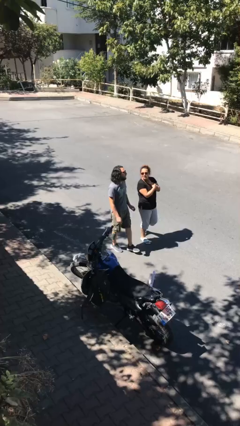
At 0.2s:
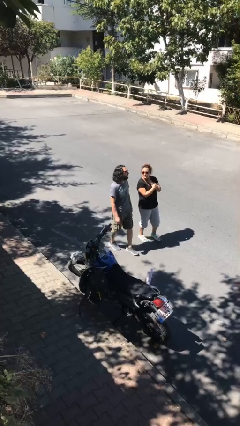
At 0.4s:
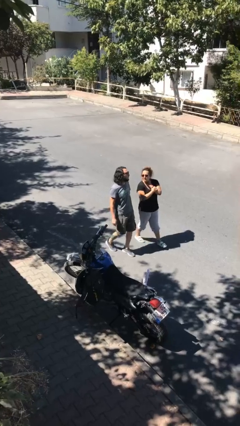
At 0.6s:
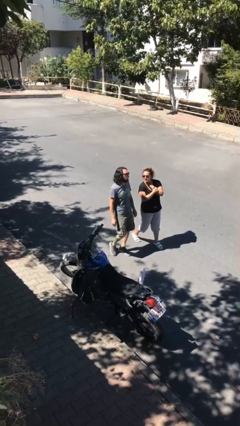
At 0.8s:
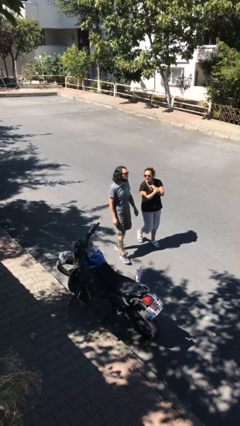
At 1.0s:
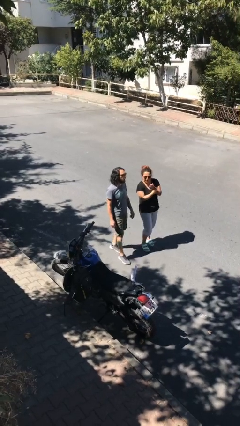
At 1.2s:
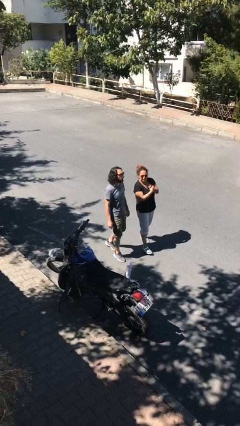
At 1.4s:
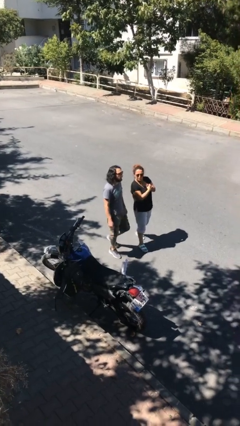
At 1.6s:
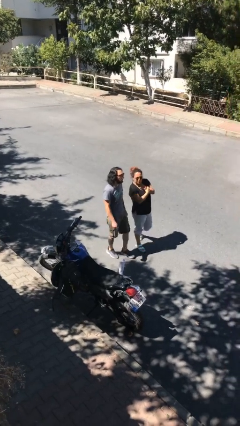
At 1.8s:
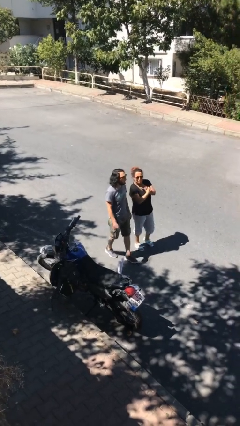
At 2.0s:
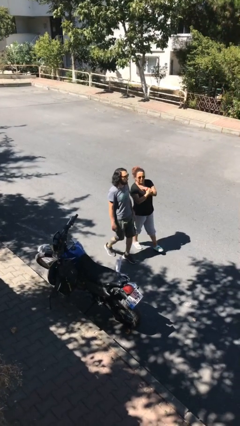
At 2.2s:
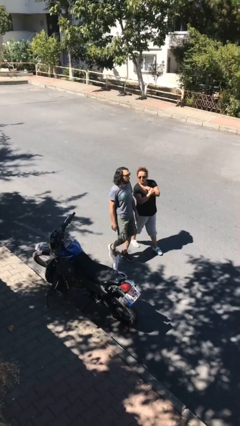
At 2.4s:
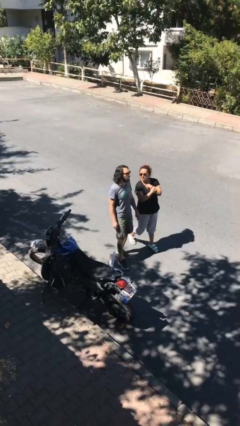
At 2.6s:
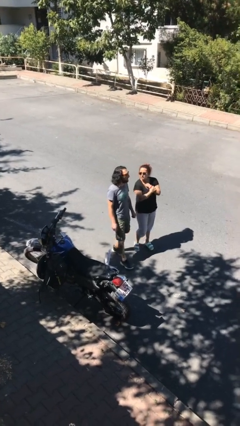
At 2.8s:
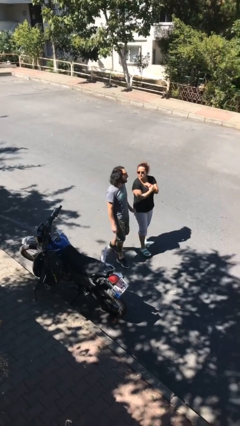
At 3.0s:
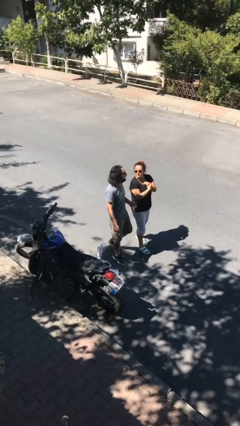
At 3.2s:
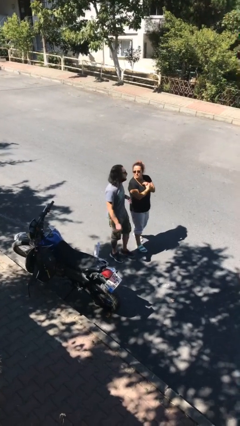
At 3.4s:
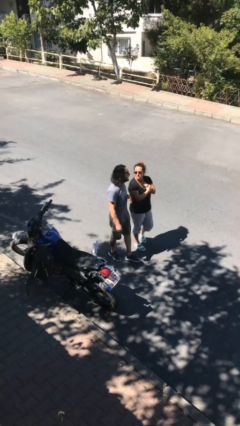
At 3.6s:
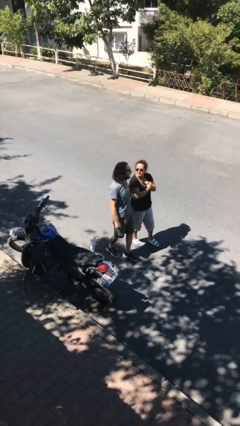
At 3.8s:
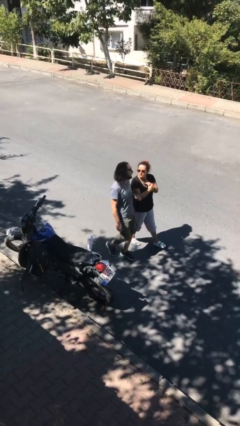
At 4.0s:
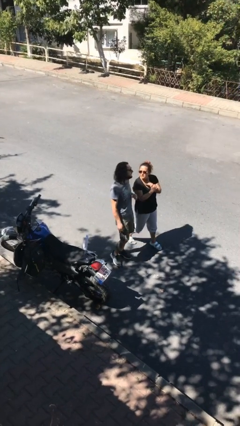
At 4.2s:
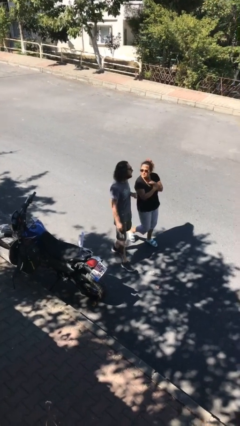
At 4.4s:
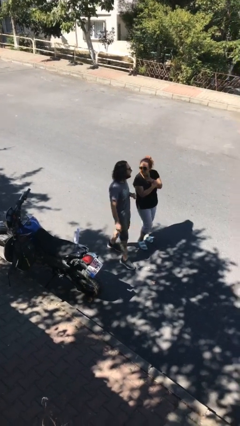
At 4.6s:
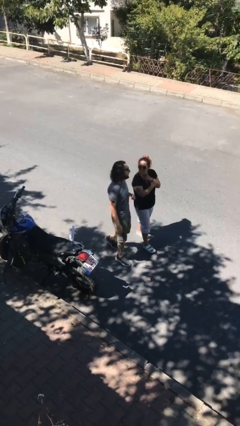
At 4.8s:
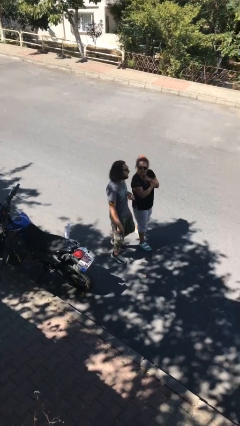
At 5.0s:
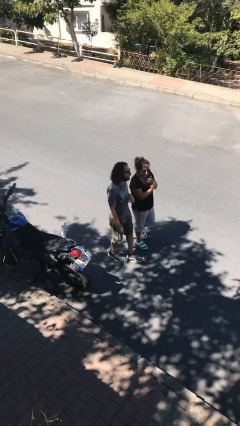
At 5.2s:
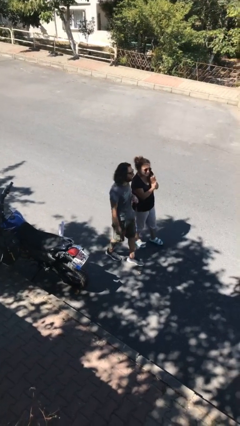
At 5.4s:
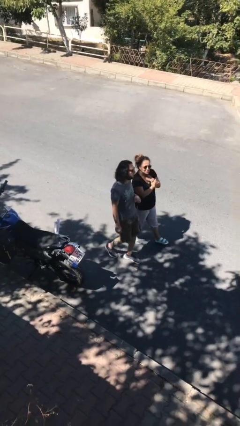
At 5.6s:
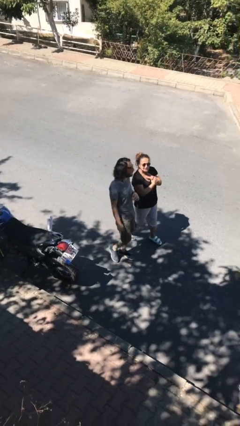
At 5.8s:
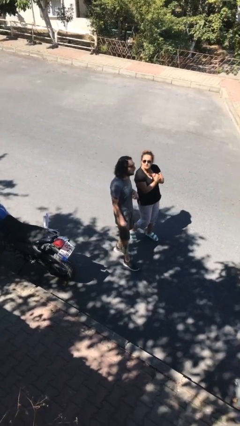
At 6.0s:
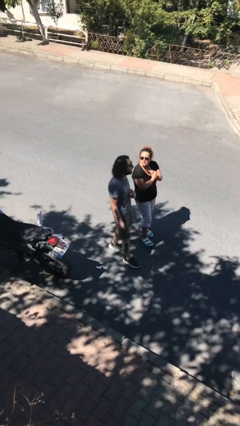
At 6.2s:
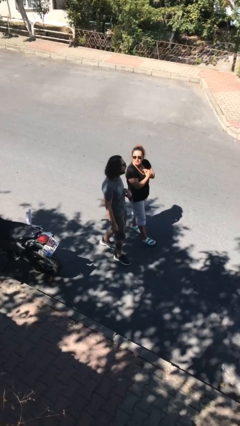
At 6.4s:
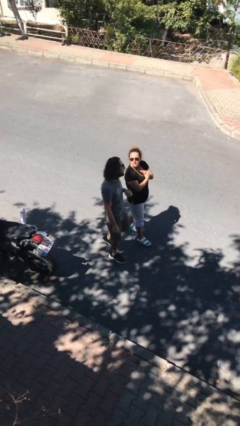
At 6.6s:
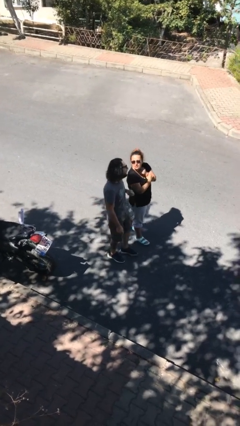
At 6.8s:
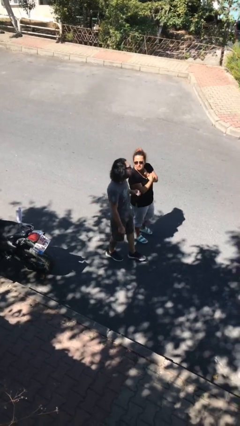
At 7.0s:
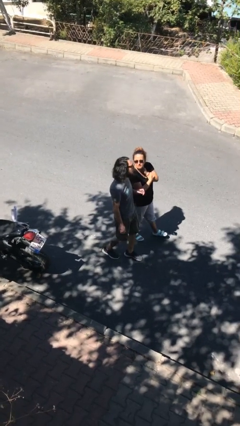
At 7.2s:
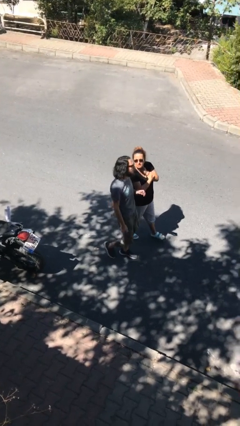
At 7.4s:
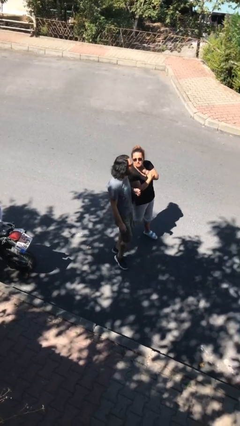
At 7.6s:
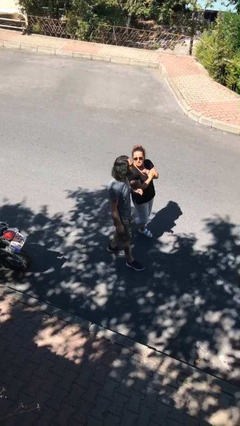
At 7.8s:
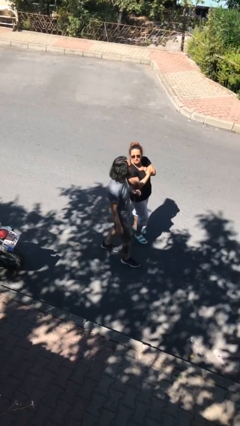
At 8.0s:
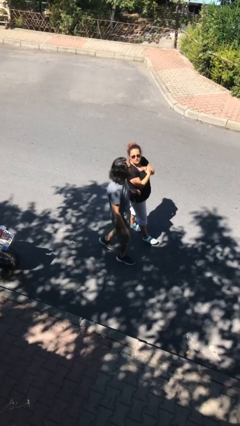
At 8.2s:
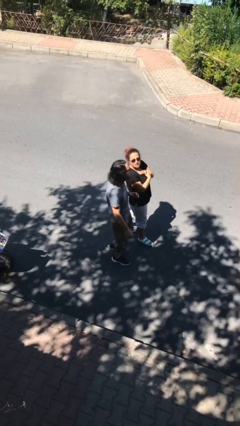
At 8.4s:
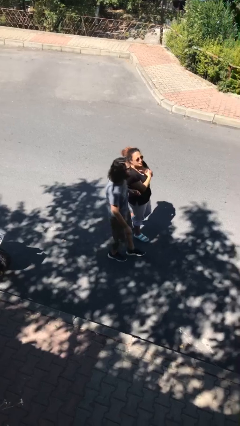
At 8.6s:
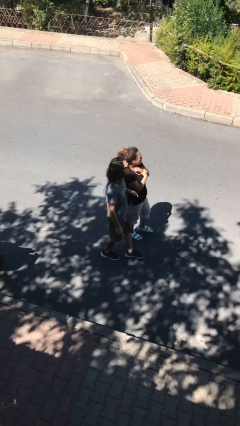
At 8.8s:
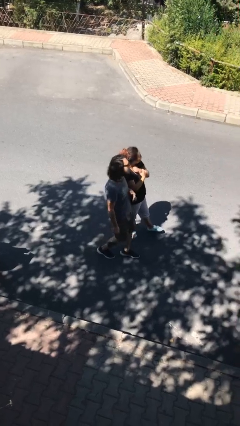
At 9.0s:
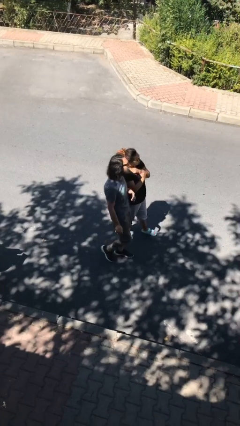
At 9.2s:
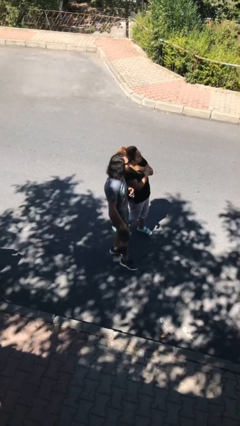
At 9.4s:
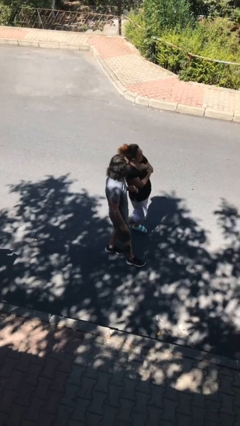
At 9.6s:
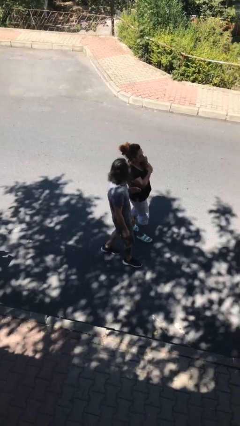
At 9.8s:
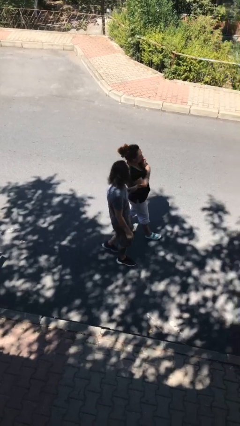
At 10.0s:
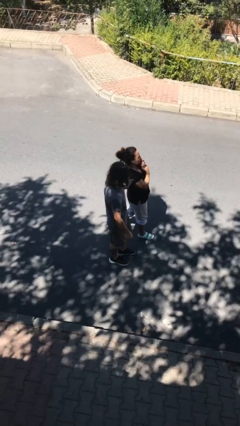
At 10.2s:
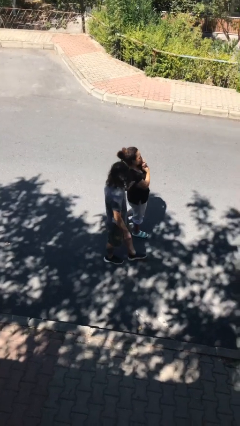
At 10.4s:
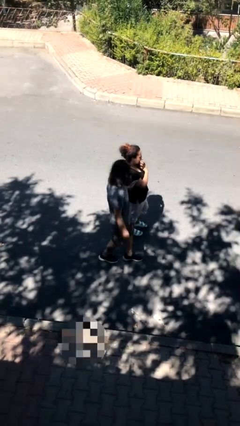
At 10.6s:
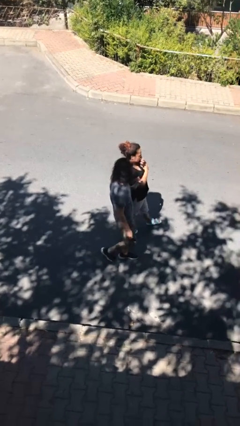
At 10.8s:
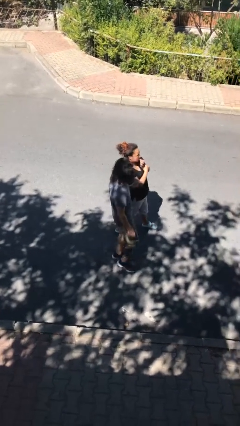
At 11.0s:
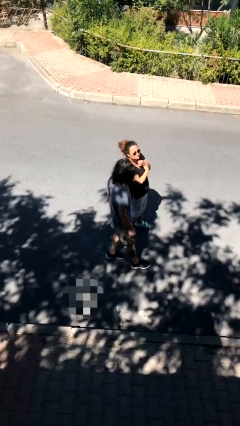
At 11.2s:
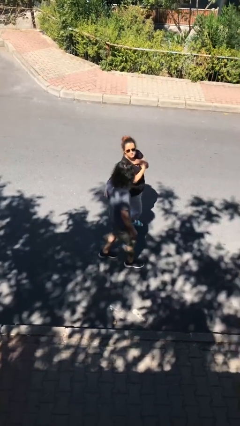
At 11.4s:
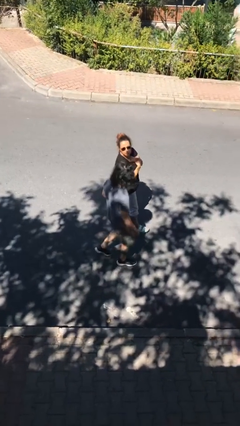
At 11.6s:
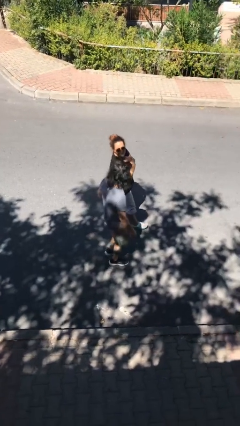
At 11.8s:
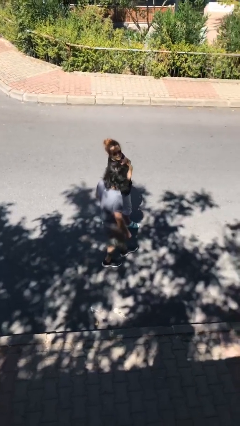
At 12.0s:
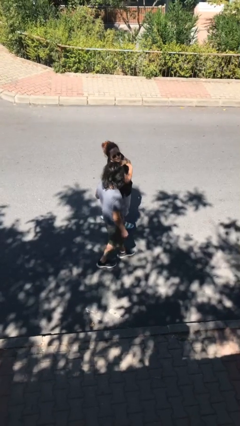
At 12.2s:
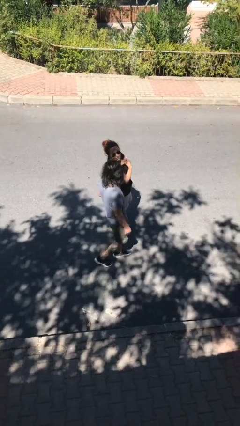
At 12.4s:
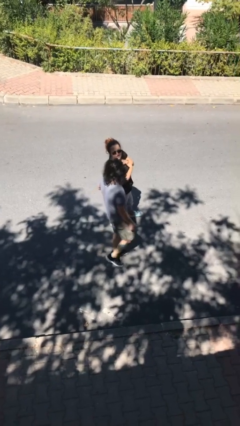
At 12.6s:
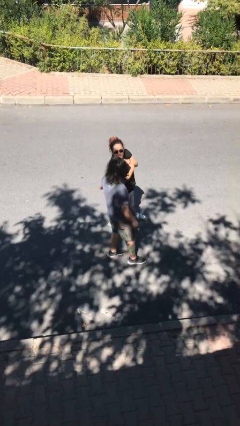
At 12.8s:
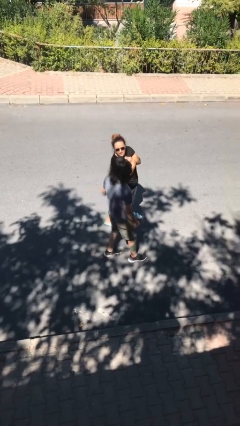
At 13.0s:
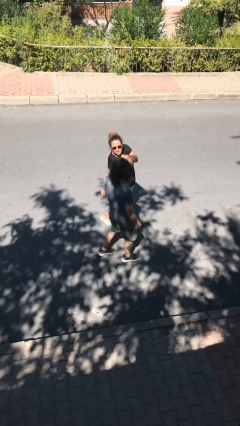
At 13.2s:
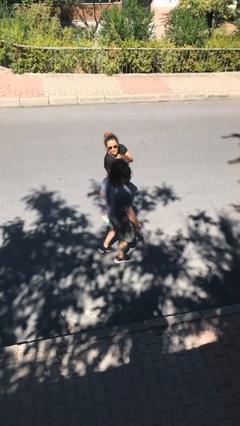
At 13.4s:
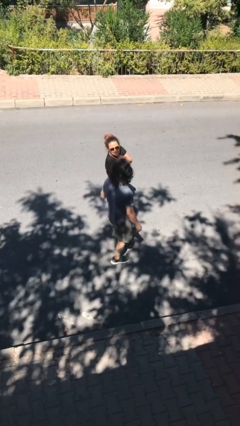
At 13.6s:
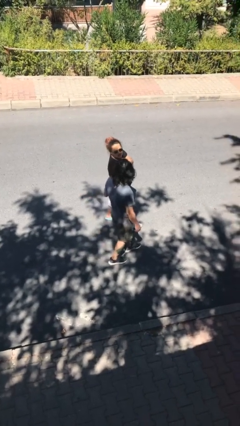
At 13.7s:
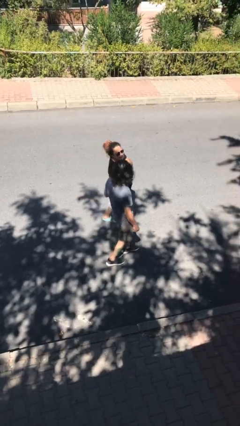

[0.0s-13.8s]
person talks to person

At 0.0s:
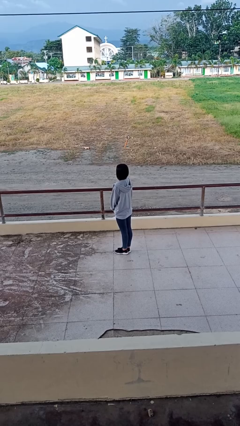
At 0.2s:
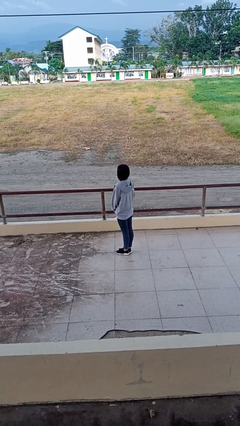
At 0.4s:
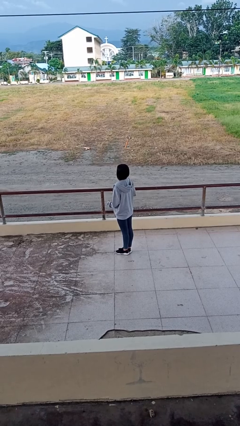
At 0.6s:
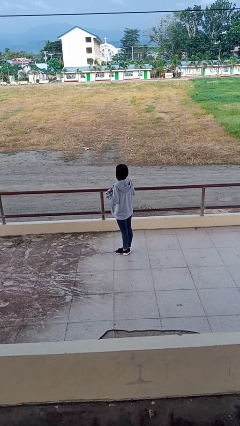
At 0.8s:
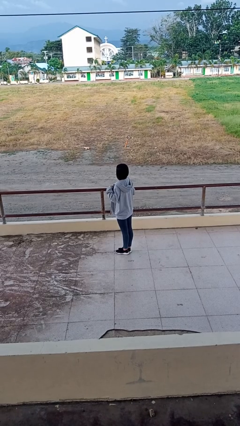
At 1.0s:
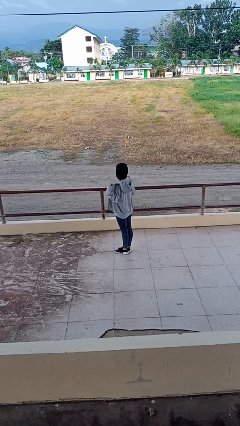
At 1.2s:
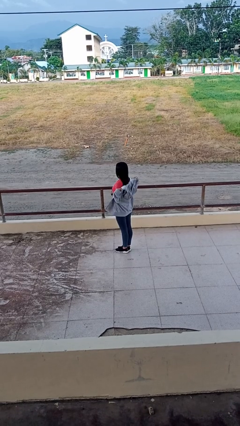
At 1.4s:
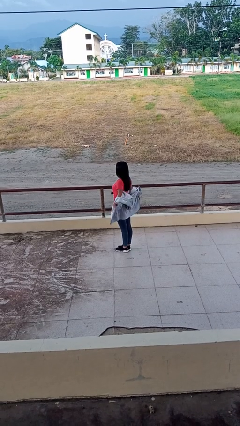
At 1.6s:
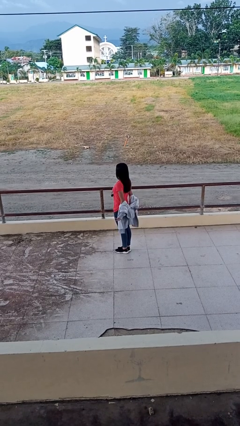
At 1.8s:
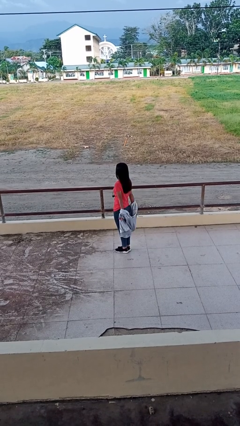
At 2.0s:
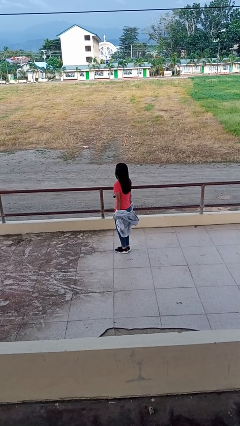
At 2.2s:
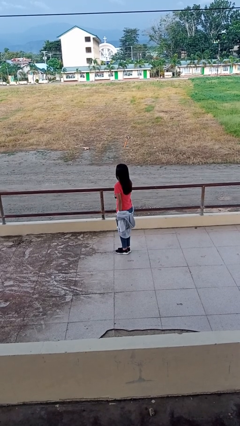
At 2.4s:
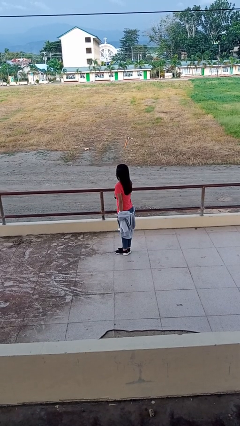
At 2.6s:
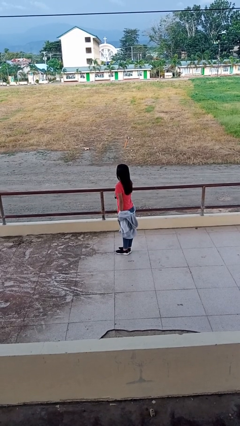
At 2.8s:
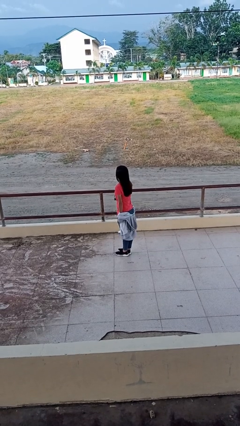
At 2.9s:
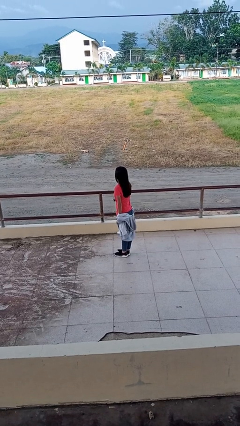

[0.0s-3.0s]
person takes off jacket

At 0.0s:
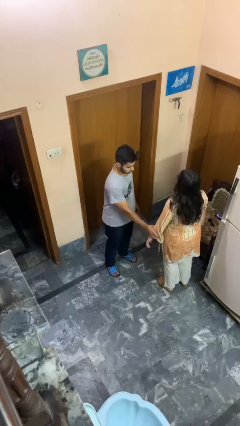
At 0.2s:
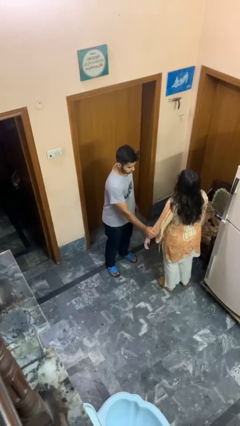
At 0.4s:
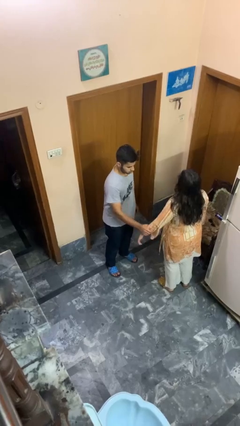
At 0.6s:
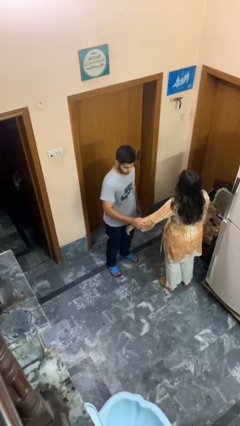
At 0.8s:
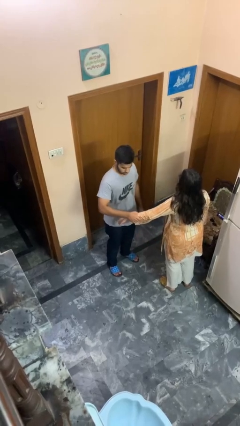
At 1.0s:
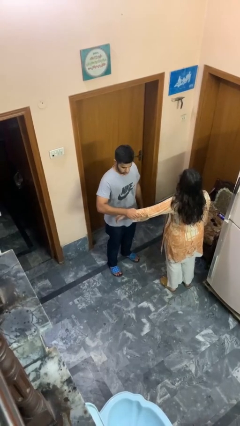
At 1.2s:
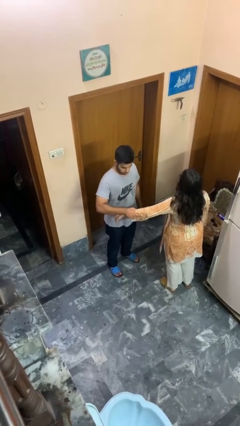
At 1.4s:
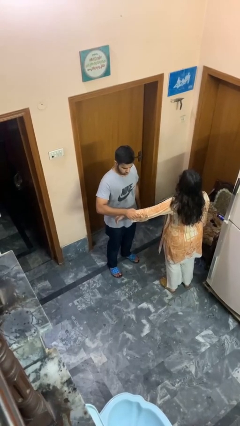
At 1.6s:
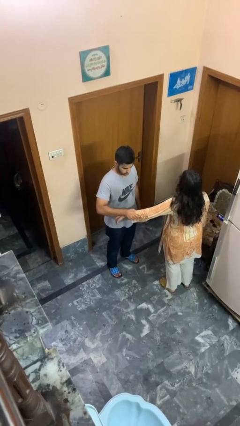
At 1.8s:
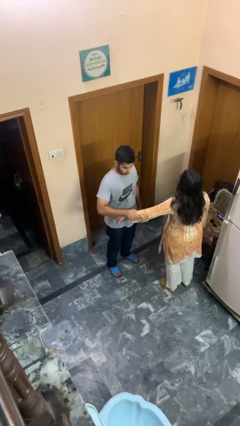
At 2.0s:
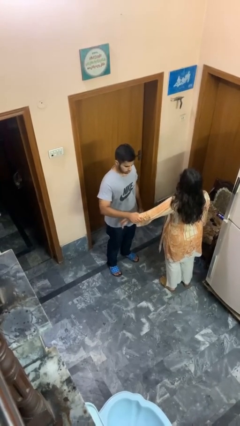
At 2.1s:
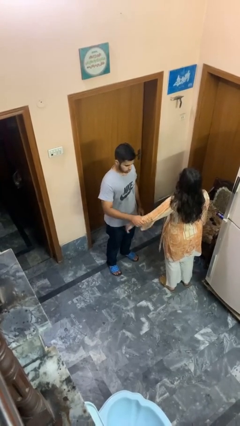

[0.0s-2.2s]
person grabs person by forearm
